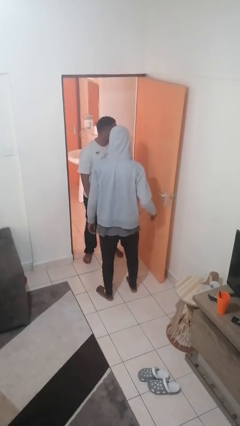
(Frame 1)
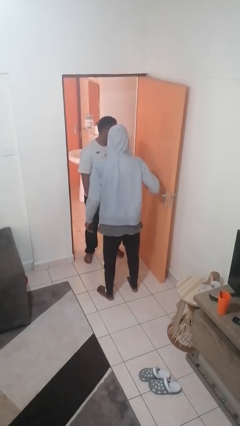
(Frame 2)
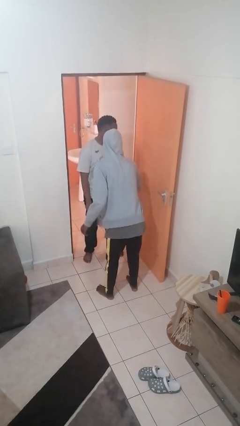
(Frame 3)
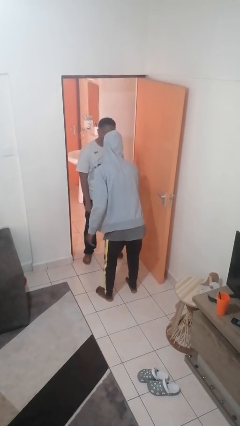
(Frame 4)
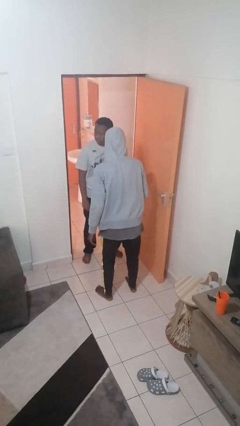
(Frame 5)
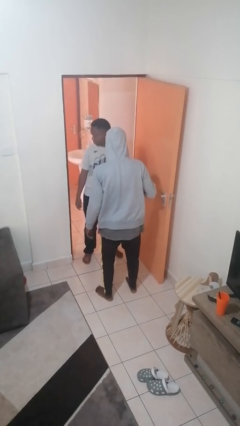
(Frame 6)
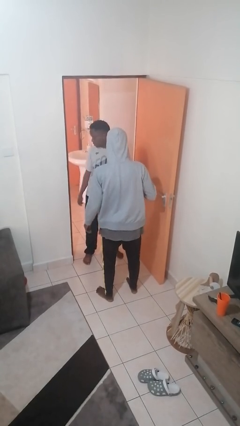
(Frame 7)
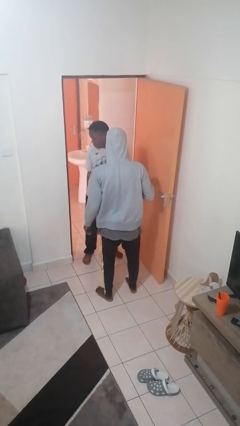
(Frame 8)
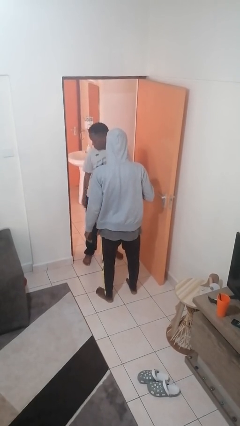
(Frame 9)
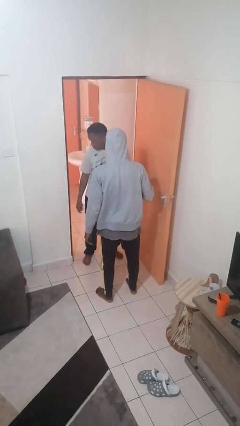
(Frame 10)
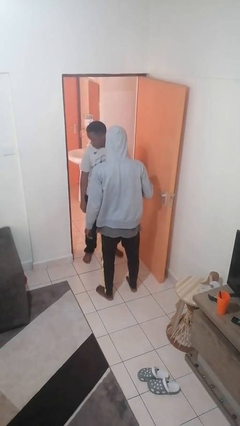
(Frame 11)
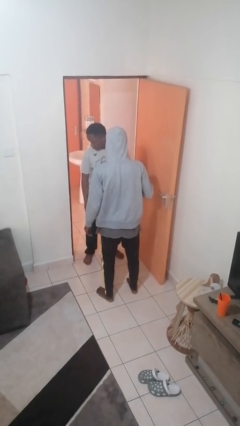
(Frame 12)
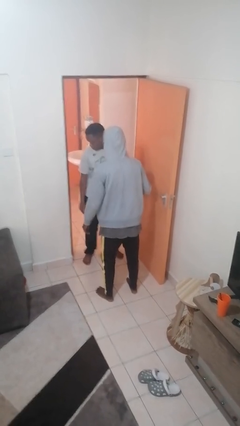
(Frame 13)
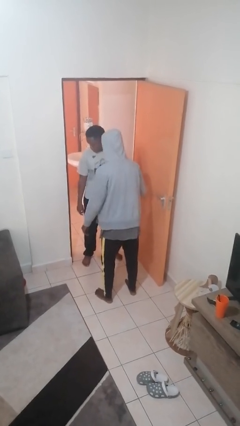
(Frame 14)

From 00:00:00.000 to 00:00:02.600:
person grabs person by forearm

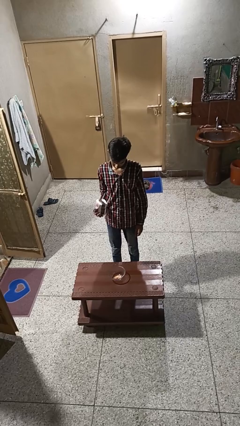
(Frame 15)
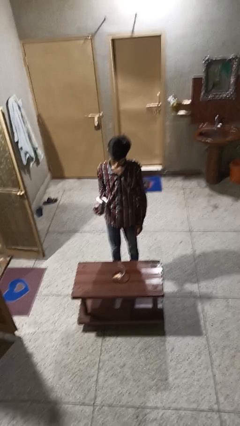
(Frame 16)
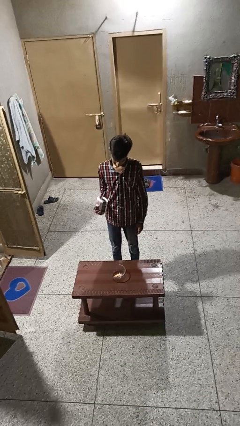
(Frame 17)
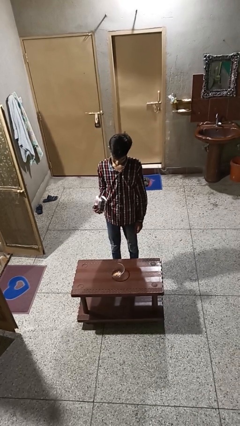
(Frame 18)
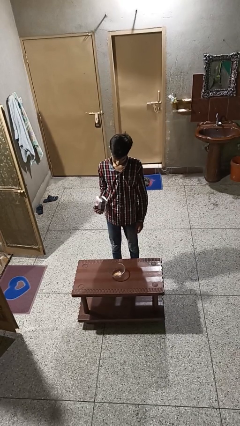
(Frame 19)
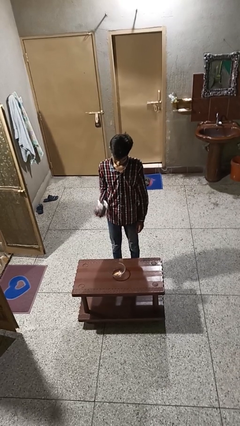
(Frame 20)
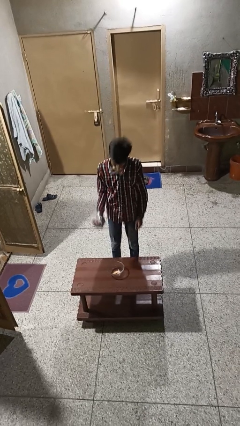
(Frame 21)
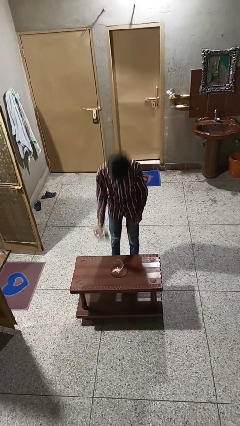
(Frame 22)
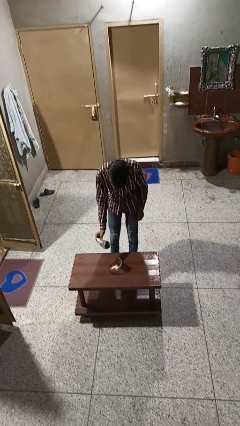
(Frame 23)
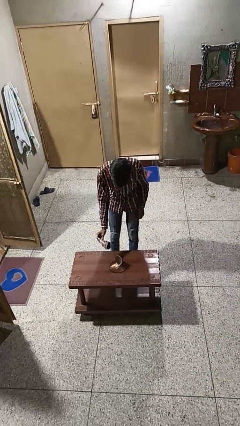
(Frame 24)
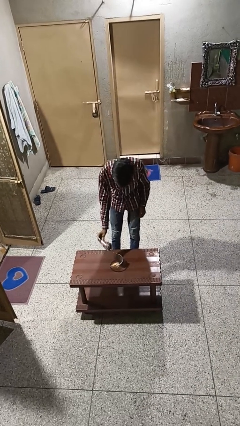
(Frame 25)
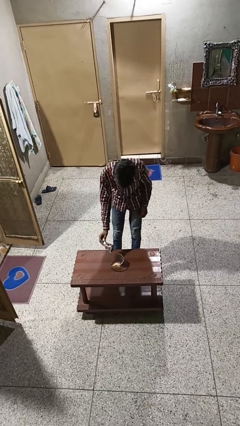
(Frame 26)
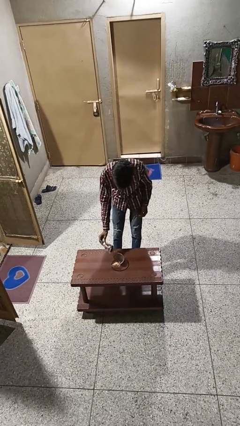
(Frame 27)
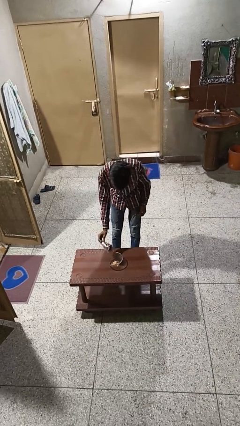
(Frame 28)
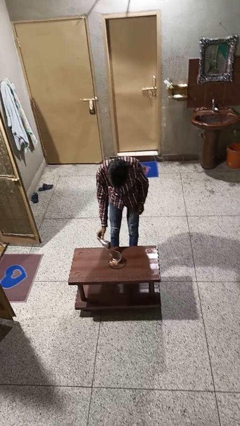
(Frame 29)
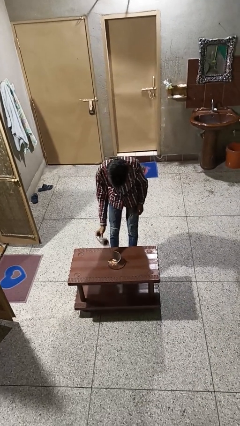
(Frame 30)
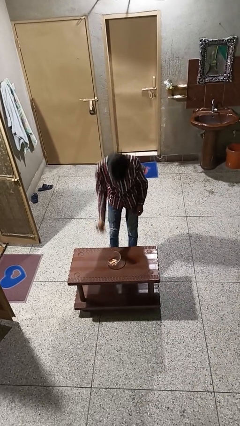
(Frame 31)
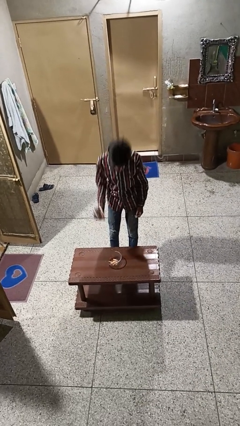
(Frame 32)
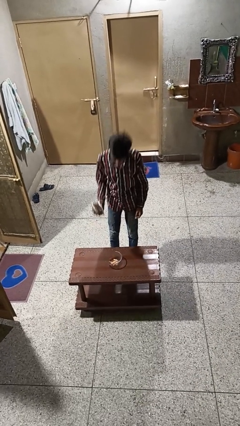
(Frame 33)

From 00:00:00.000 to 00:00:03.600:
person pours into bowl

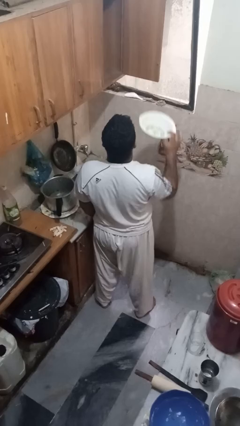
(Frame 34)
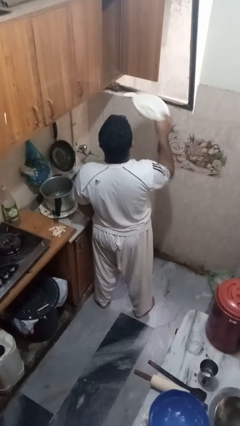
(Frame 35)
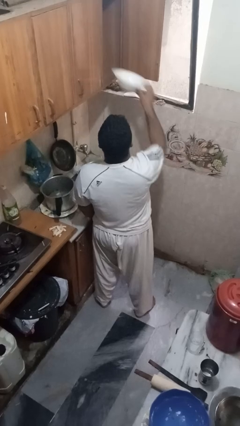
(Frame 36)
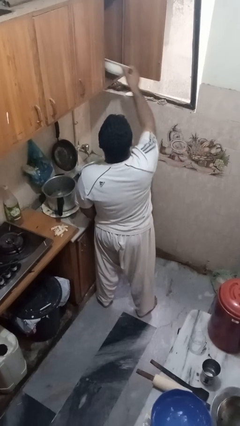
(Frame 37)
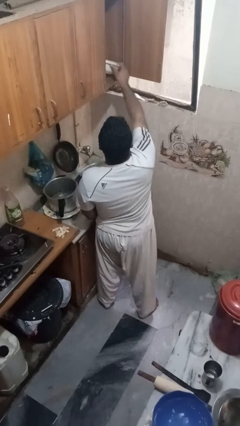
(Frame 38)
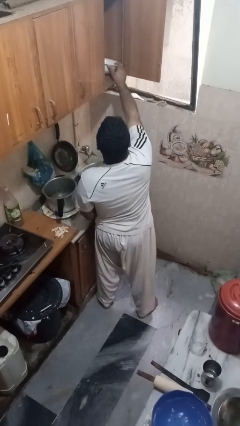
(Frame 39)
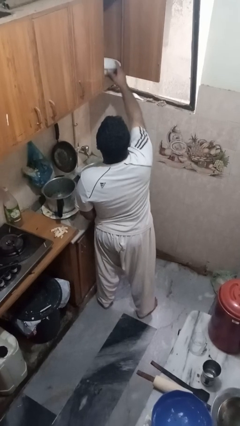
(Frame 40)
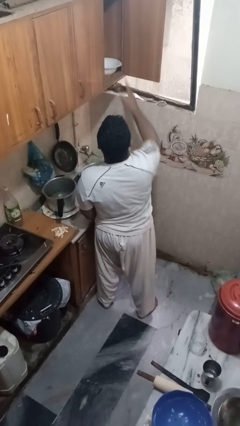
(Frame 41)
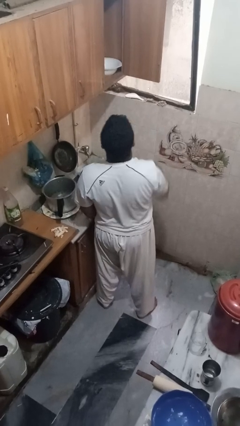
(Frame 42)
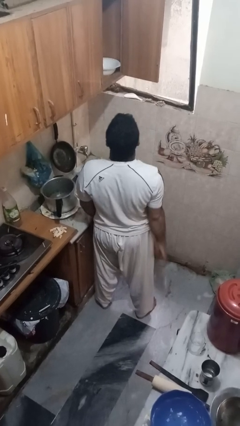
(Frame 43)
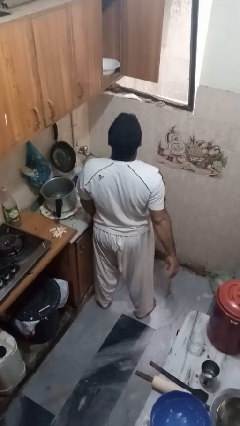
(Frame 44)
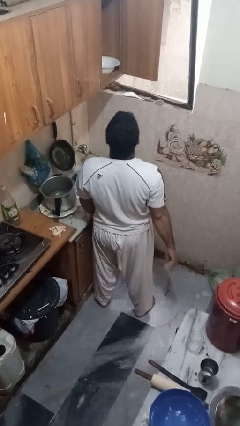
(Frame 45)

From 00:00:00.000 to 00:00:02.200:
person puts object in cabinet

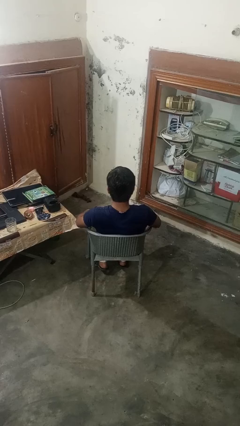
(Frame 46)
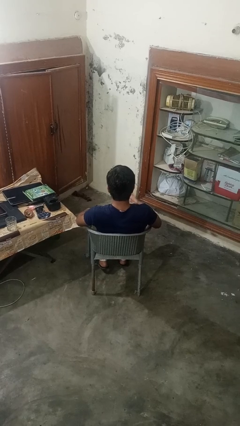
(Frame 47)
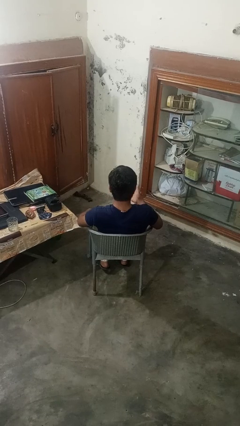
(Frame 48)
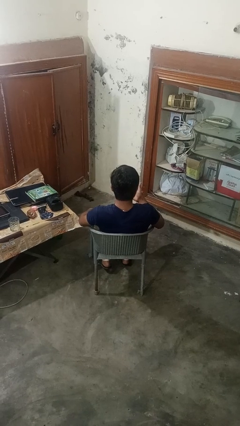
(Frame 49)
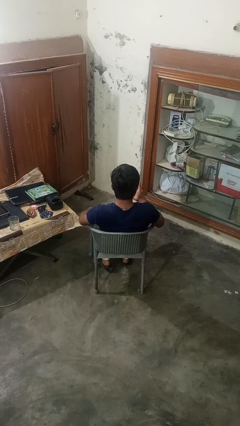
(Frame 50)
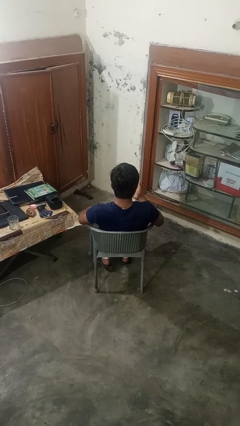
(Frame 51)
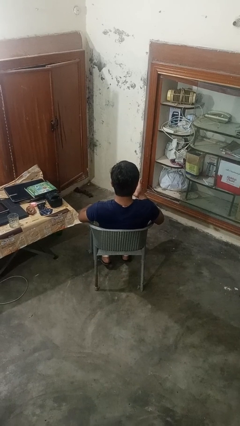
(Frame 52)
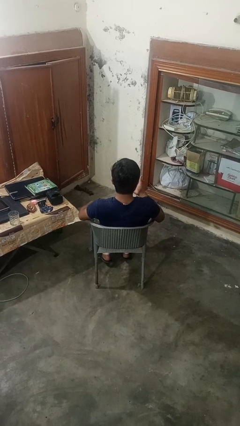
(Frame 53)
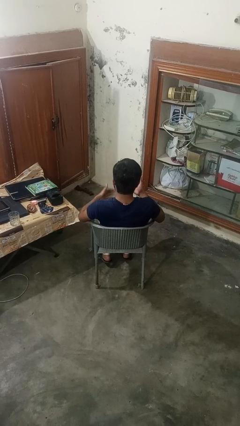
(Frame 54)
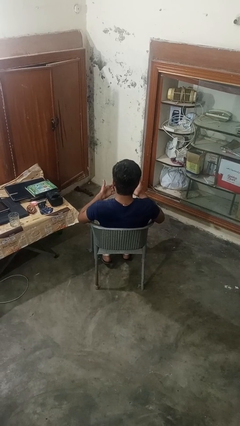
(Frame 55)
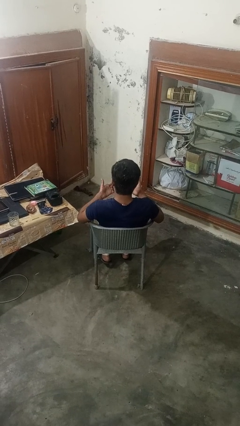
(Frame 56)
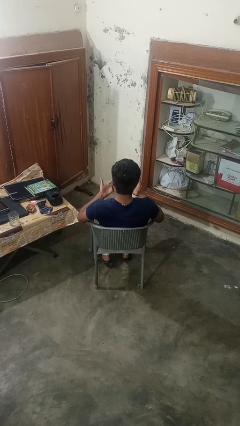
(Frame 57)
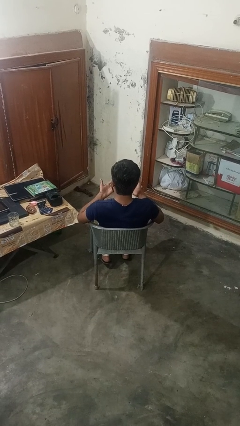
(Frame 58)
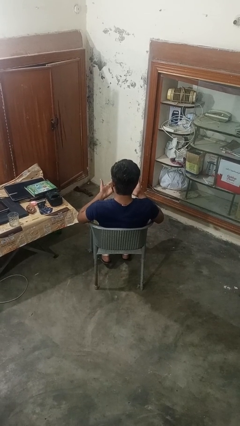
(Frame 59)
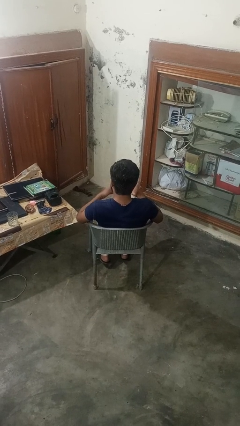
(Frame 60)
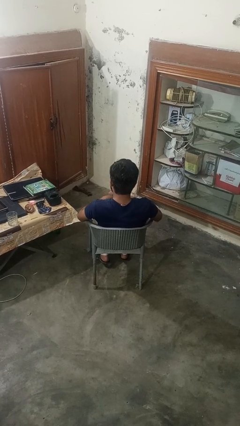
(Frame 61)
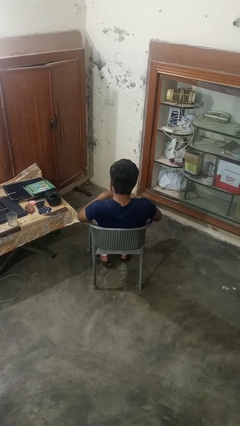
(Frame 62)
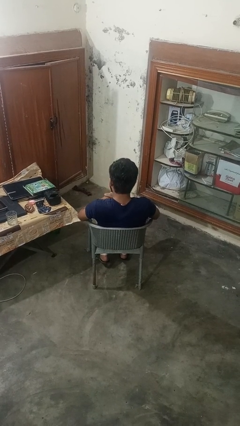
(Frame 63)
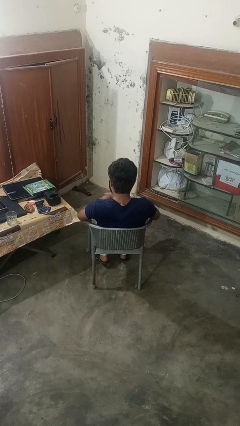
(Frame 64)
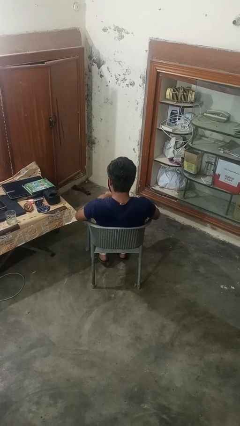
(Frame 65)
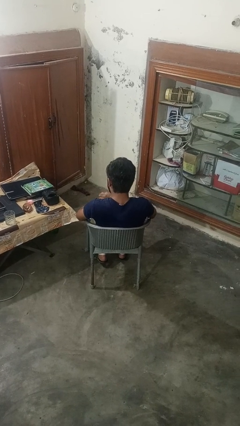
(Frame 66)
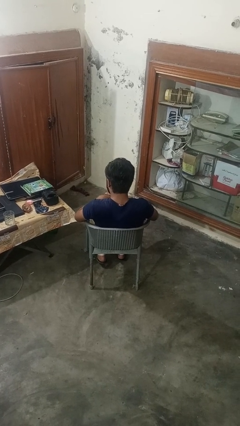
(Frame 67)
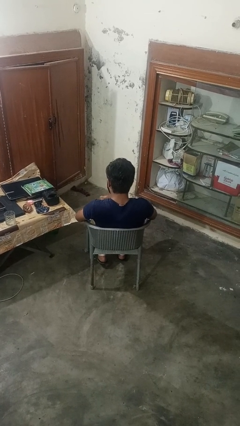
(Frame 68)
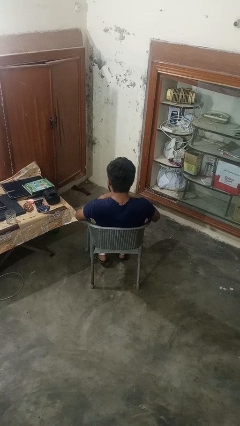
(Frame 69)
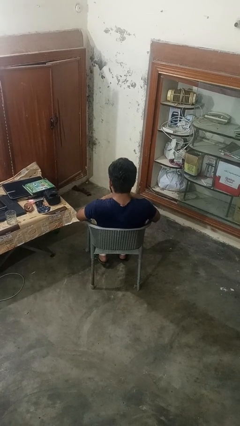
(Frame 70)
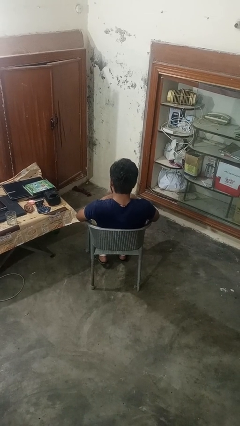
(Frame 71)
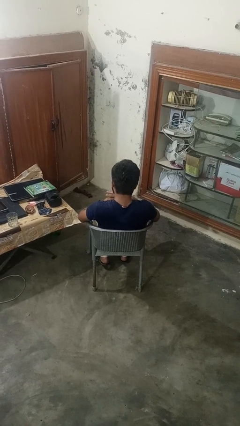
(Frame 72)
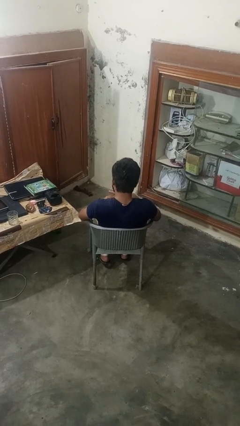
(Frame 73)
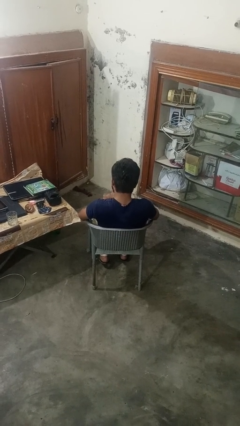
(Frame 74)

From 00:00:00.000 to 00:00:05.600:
person looks at hands in lap

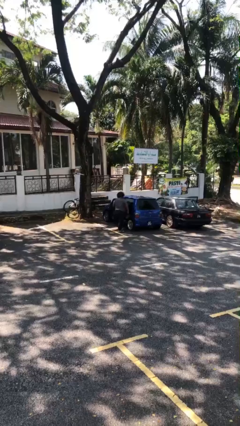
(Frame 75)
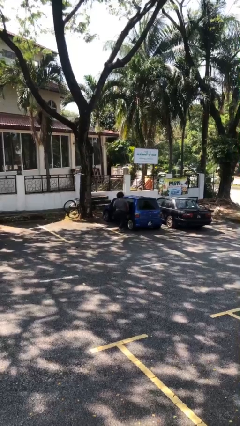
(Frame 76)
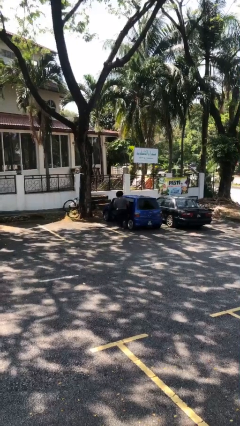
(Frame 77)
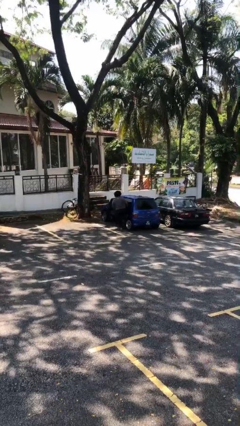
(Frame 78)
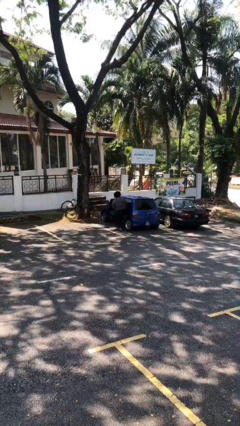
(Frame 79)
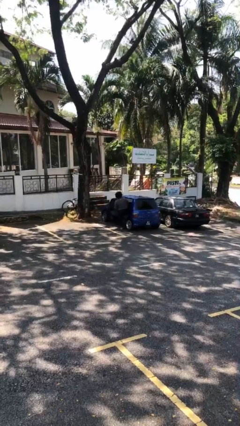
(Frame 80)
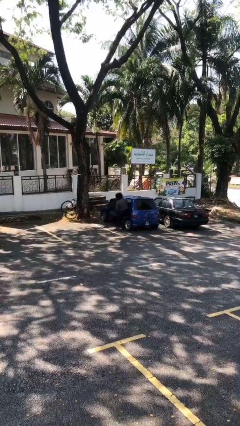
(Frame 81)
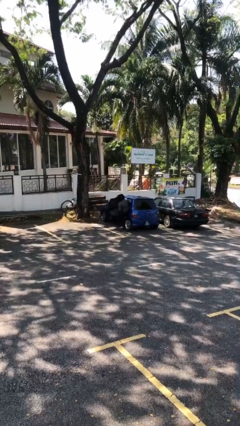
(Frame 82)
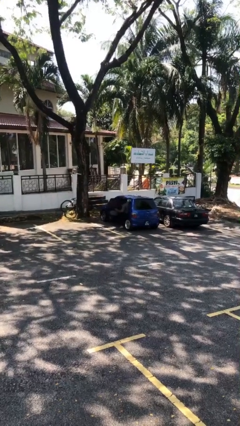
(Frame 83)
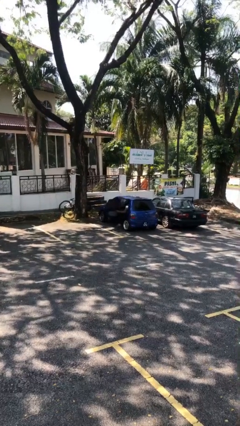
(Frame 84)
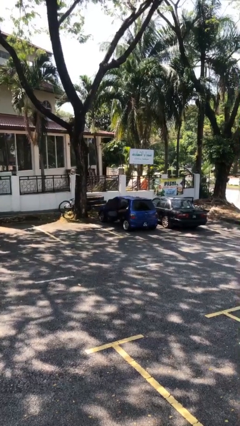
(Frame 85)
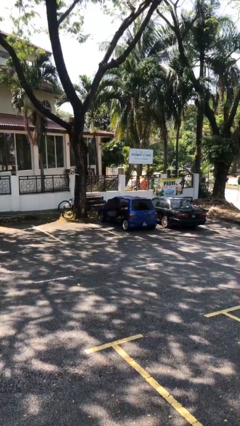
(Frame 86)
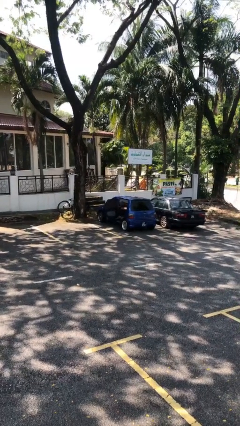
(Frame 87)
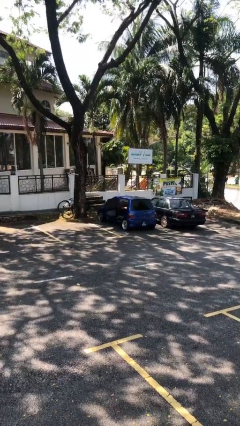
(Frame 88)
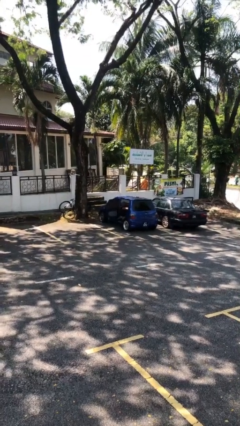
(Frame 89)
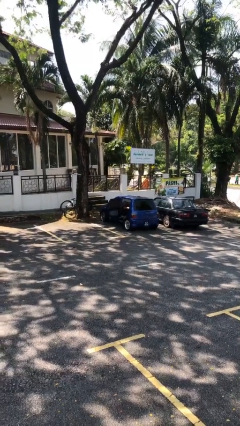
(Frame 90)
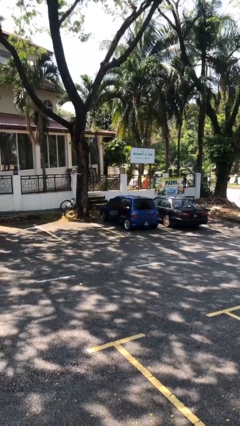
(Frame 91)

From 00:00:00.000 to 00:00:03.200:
person enters car
